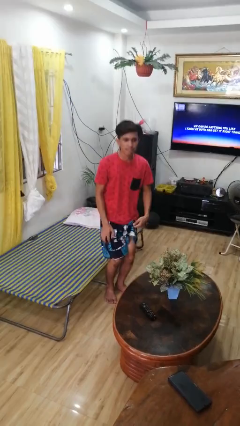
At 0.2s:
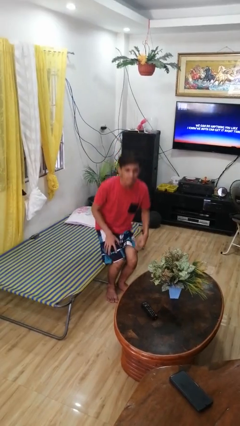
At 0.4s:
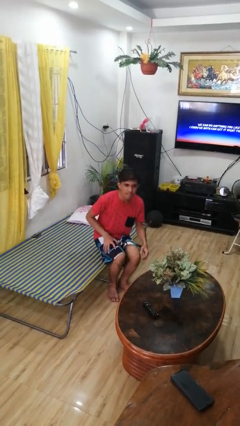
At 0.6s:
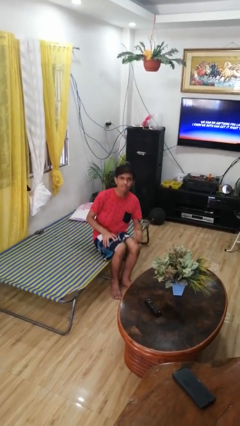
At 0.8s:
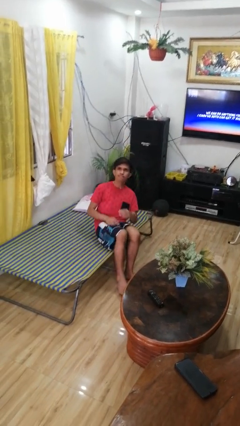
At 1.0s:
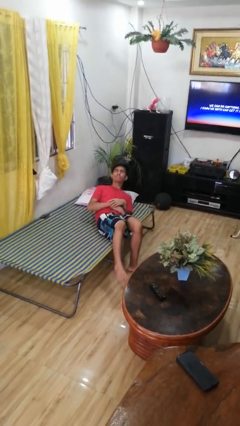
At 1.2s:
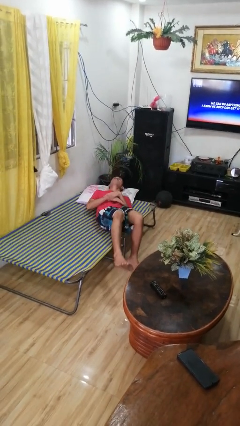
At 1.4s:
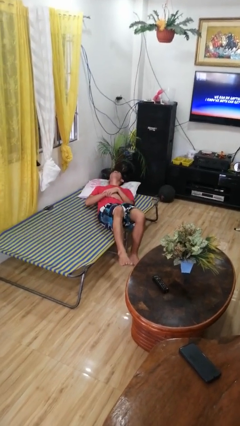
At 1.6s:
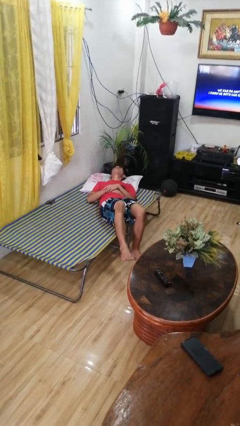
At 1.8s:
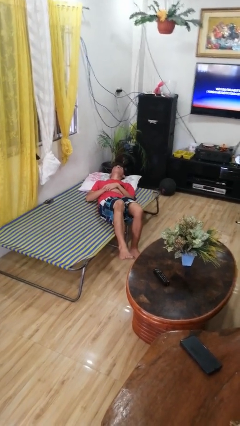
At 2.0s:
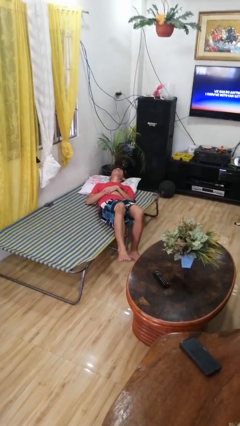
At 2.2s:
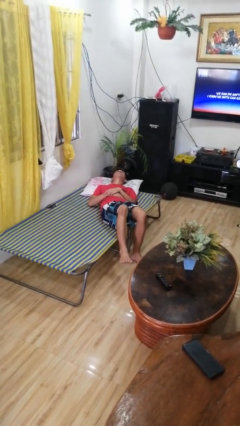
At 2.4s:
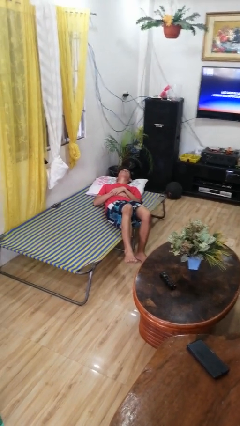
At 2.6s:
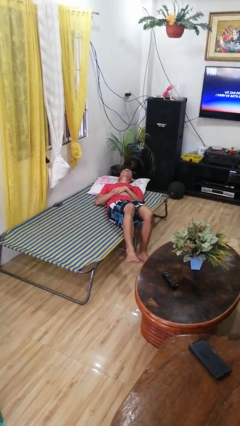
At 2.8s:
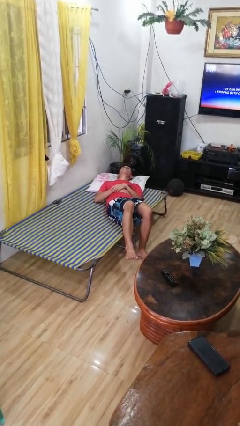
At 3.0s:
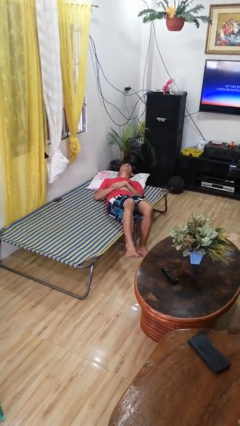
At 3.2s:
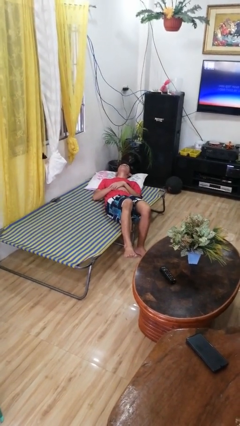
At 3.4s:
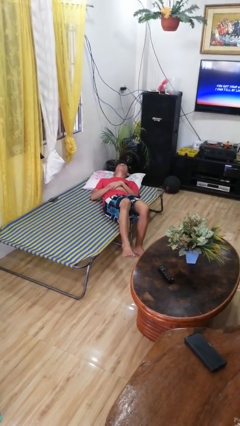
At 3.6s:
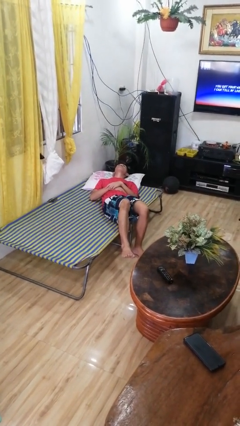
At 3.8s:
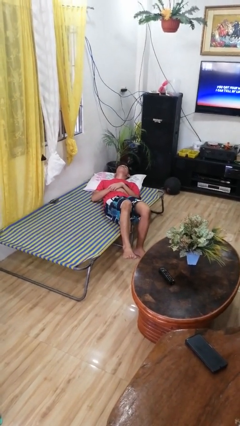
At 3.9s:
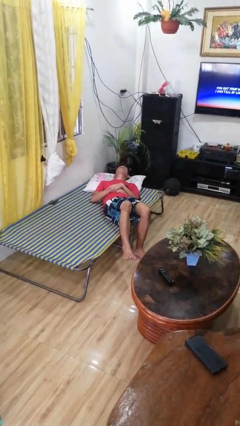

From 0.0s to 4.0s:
person lies down on bed

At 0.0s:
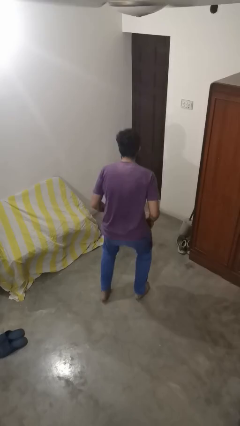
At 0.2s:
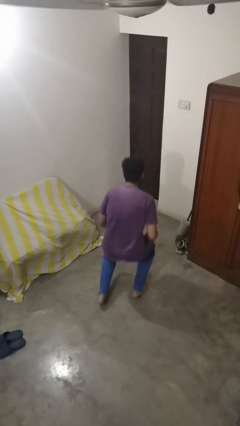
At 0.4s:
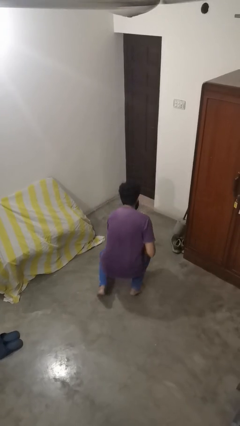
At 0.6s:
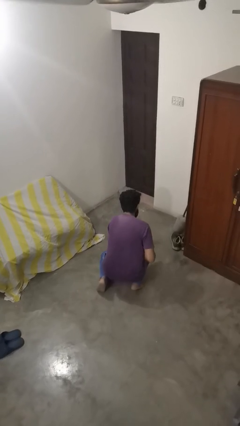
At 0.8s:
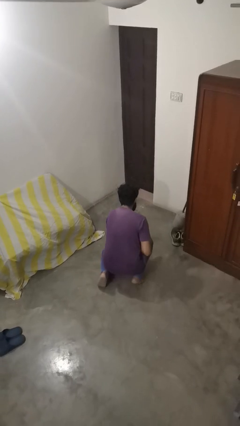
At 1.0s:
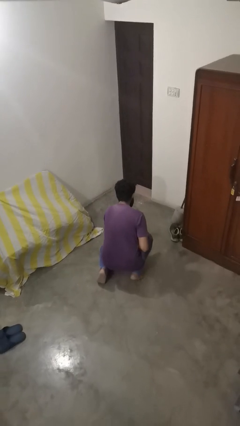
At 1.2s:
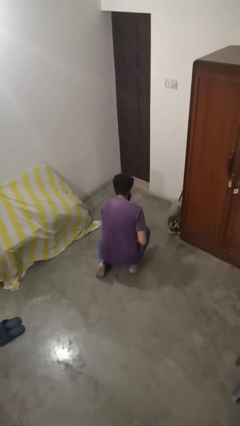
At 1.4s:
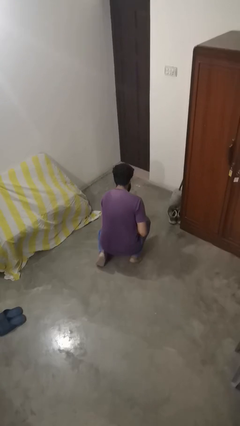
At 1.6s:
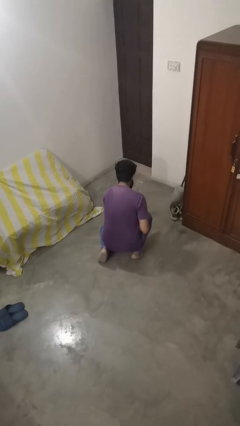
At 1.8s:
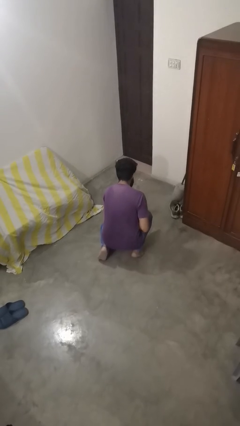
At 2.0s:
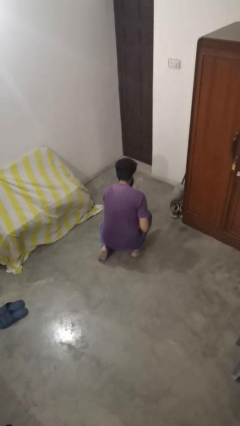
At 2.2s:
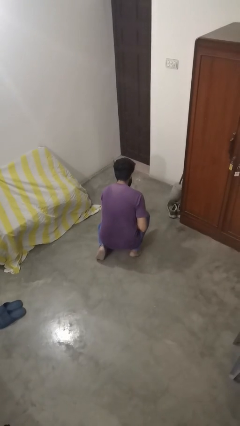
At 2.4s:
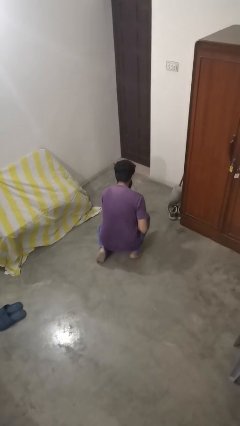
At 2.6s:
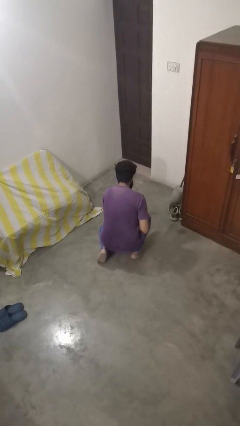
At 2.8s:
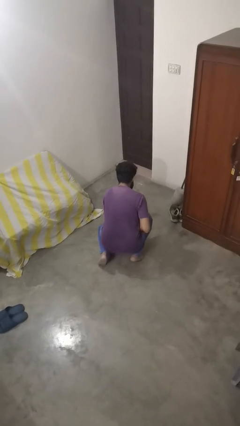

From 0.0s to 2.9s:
person kneels

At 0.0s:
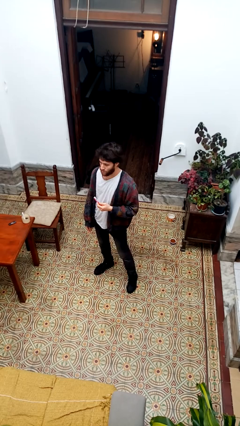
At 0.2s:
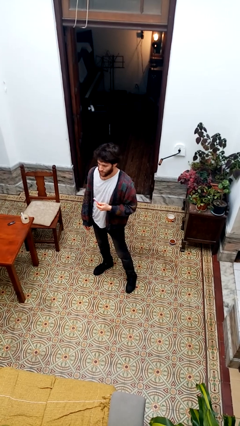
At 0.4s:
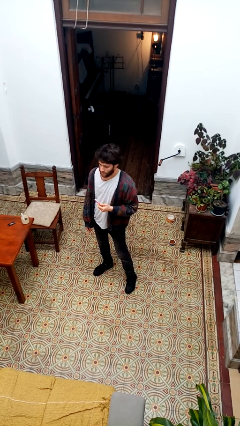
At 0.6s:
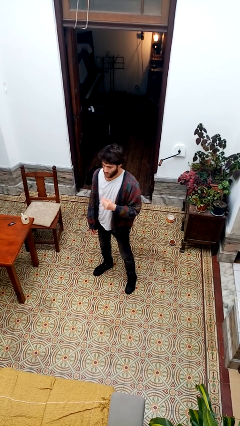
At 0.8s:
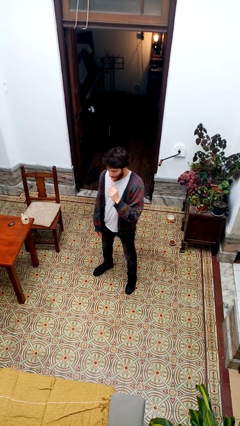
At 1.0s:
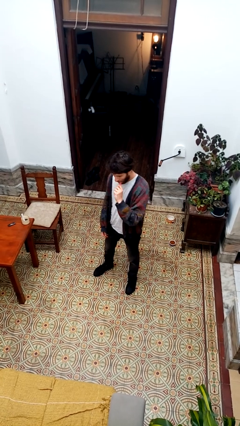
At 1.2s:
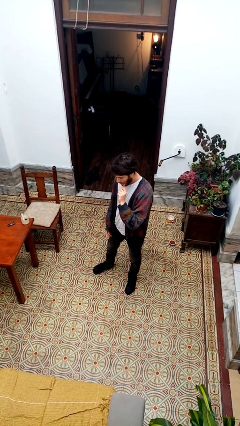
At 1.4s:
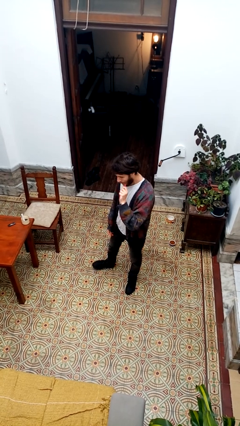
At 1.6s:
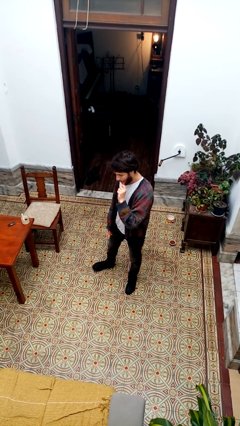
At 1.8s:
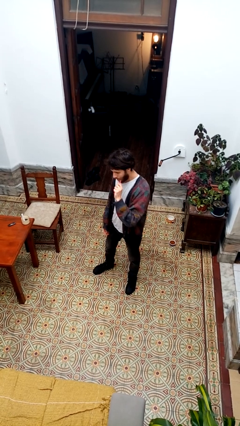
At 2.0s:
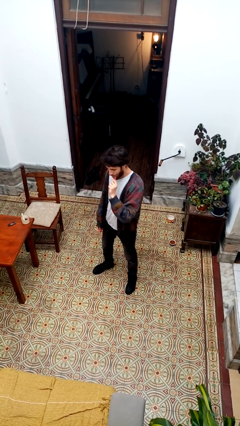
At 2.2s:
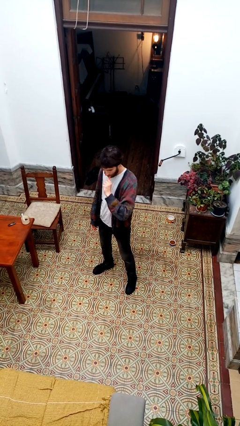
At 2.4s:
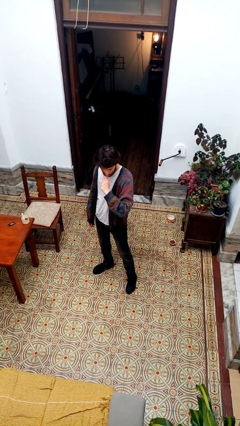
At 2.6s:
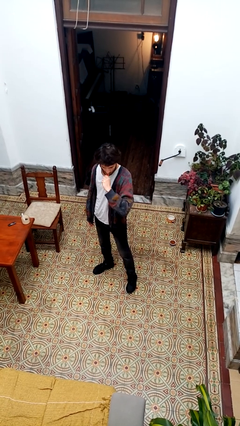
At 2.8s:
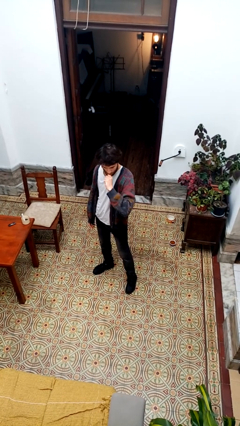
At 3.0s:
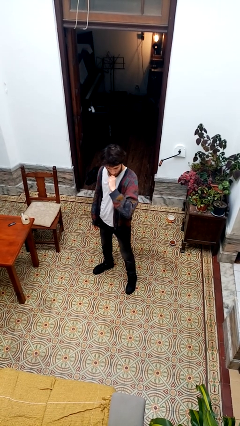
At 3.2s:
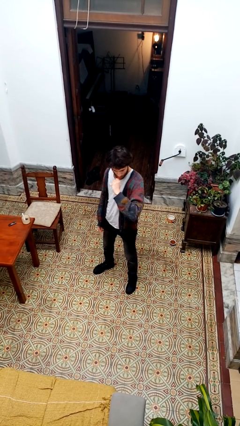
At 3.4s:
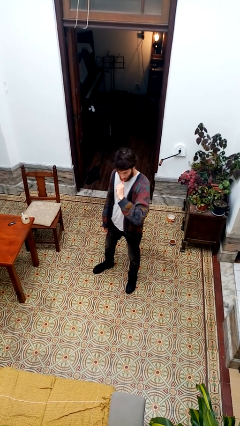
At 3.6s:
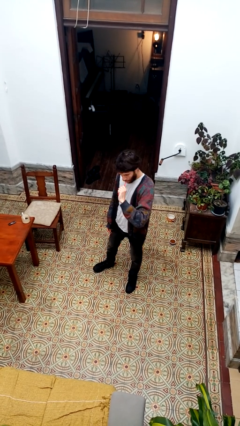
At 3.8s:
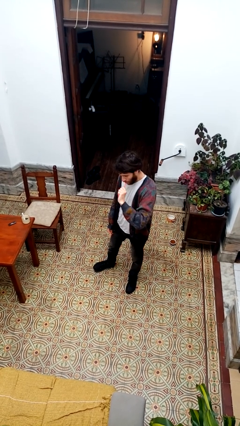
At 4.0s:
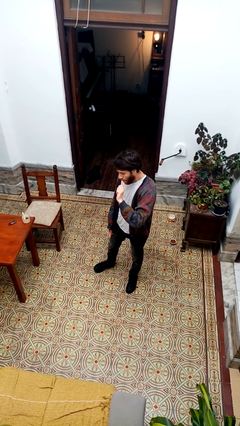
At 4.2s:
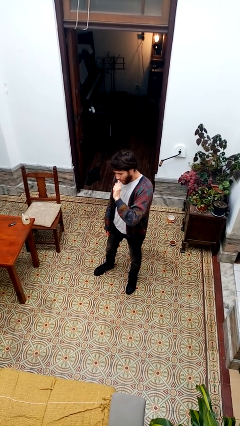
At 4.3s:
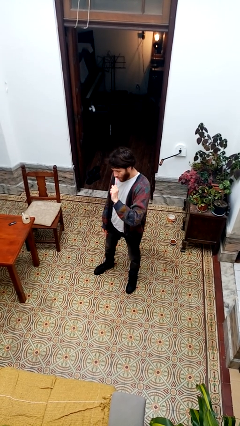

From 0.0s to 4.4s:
person brushes teeth

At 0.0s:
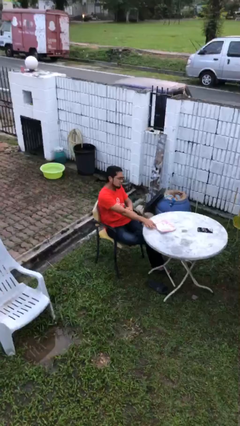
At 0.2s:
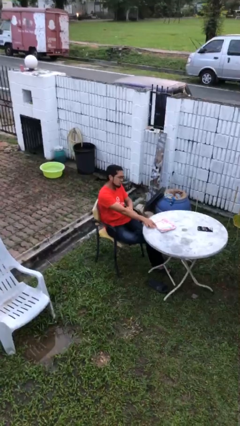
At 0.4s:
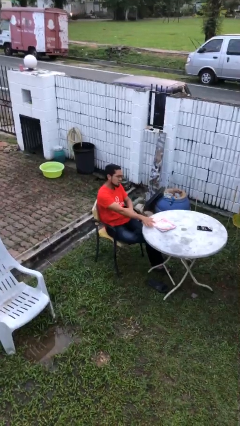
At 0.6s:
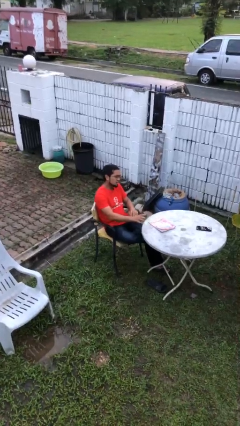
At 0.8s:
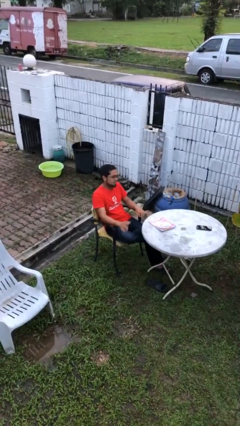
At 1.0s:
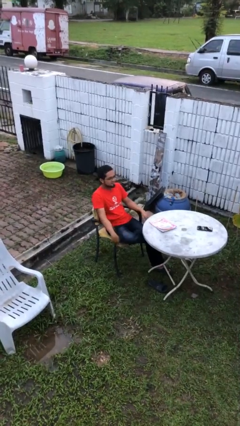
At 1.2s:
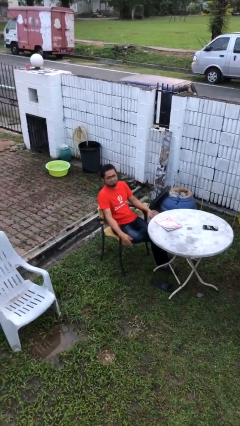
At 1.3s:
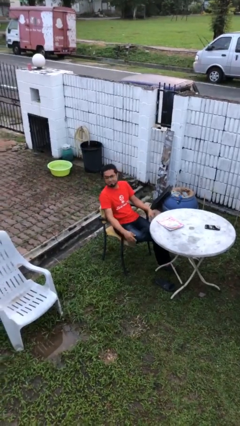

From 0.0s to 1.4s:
person puts down object on table

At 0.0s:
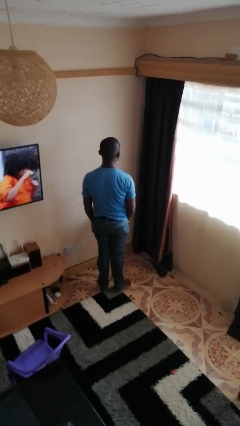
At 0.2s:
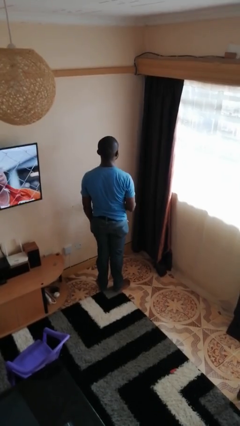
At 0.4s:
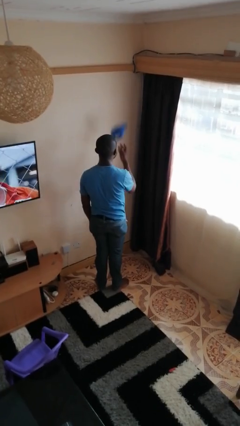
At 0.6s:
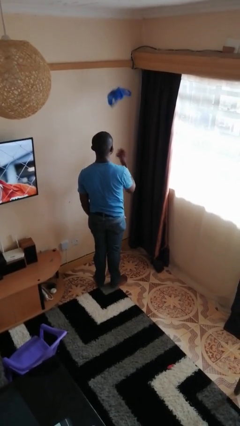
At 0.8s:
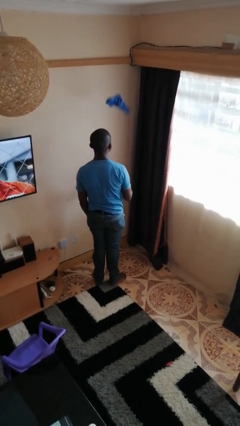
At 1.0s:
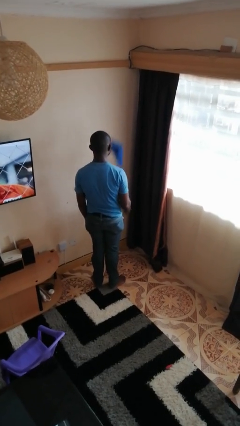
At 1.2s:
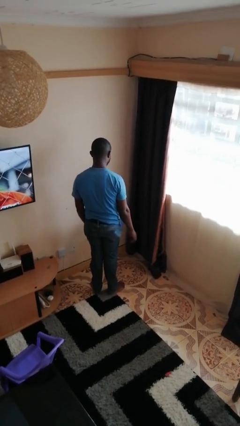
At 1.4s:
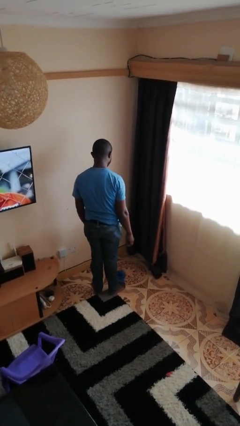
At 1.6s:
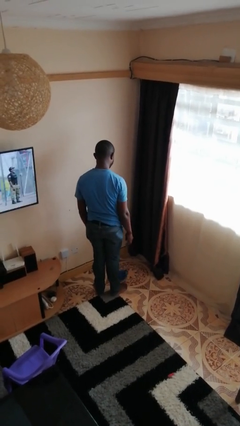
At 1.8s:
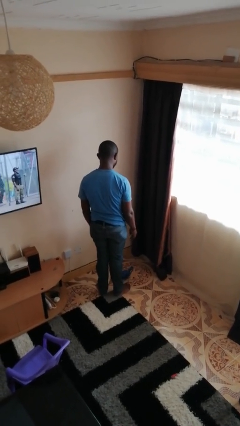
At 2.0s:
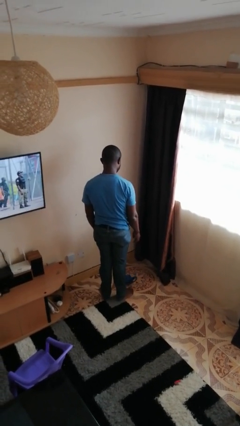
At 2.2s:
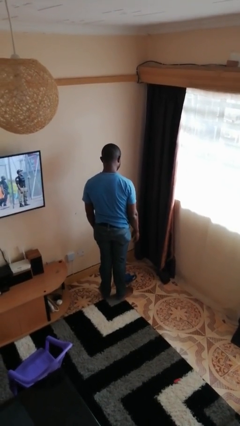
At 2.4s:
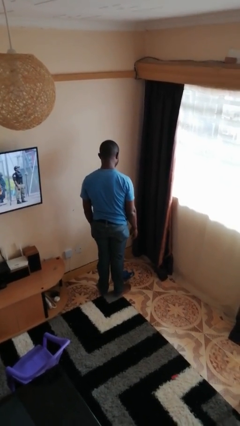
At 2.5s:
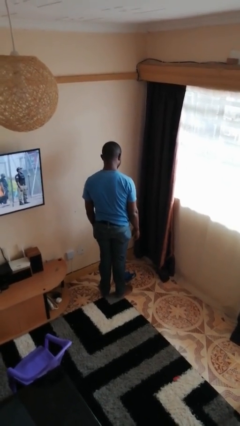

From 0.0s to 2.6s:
person throws object into air

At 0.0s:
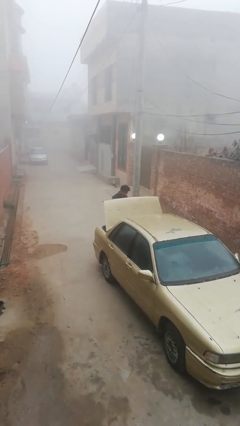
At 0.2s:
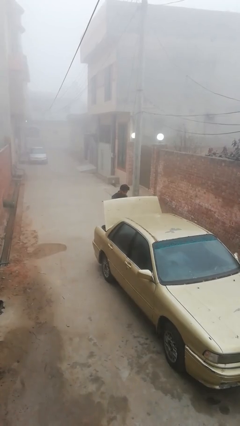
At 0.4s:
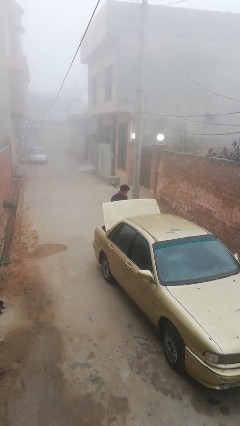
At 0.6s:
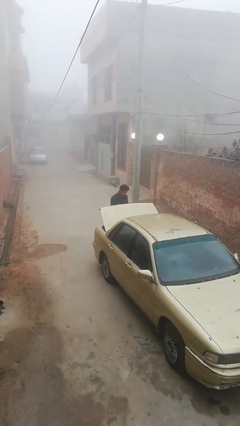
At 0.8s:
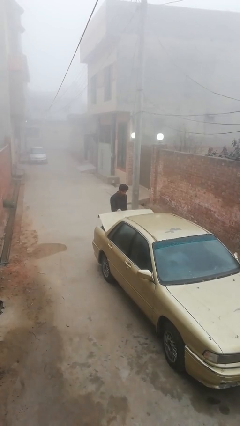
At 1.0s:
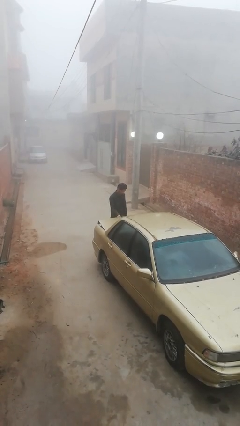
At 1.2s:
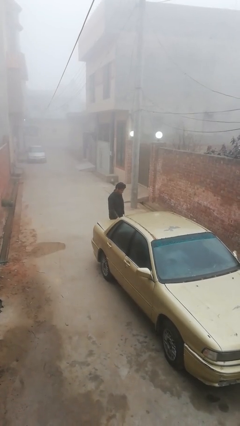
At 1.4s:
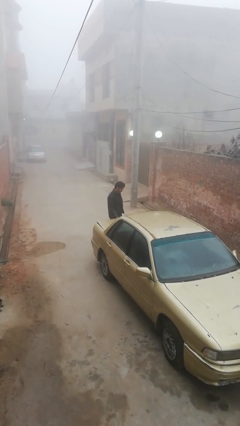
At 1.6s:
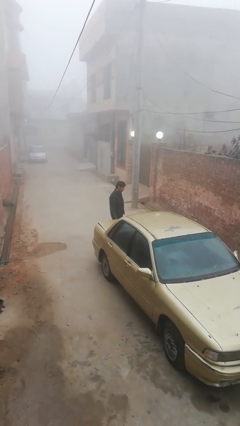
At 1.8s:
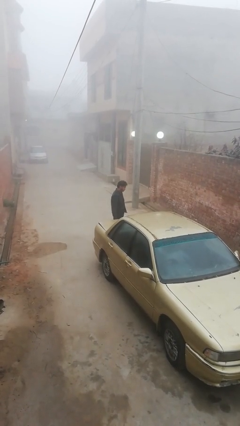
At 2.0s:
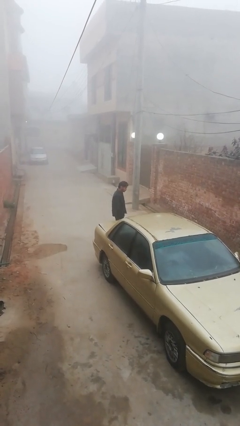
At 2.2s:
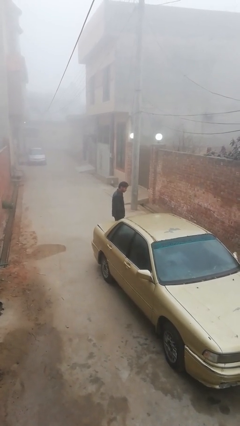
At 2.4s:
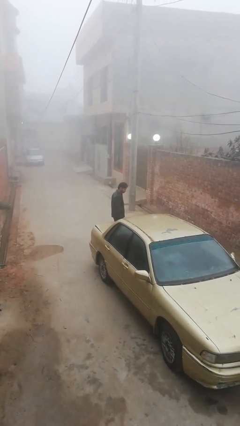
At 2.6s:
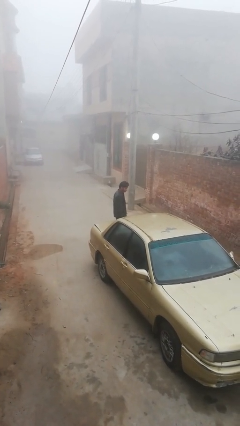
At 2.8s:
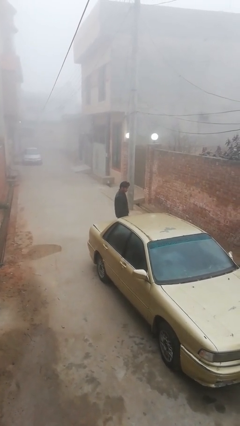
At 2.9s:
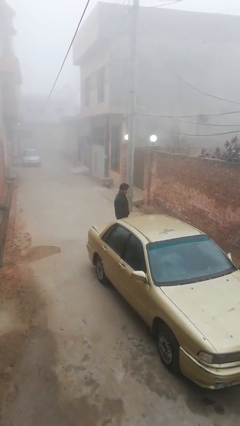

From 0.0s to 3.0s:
person closes car trunk
